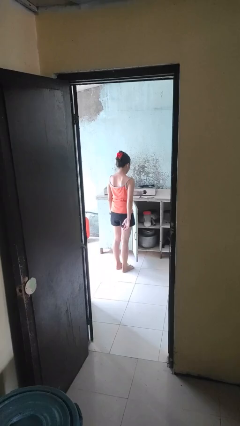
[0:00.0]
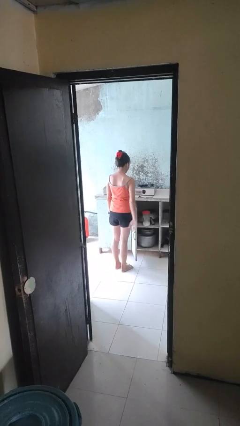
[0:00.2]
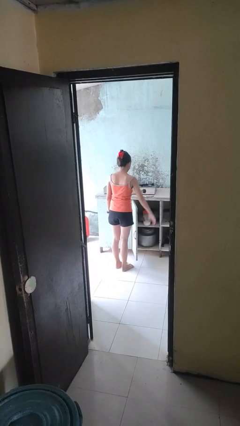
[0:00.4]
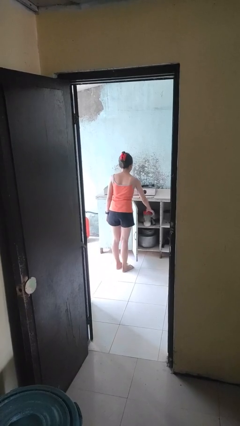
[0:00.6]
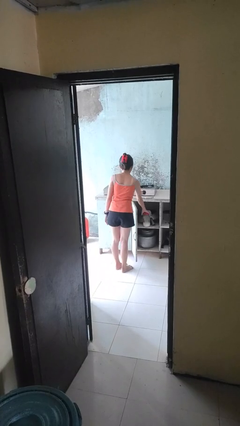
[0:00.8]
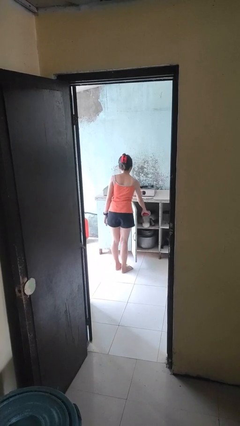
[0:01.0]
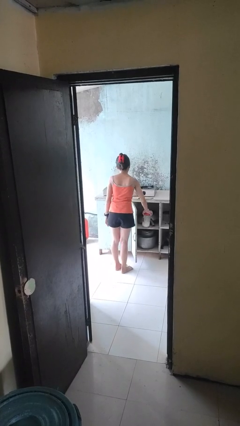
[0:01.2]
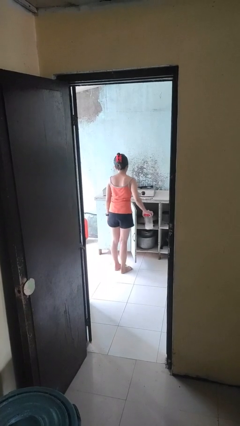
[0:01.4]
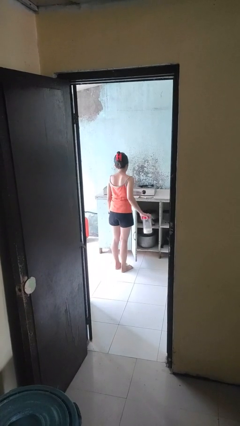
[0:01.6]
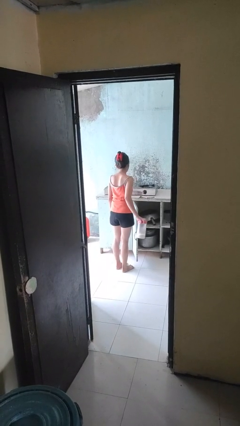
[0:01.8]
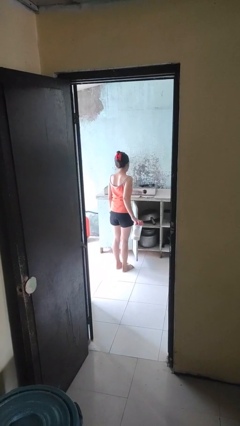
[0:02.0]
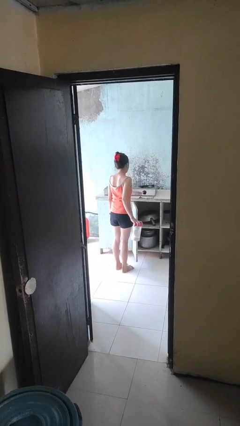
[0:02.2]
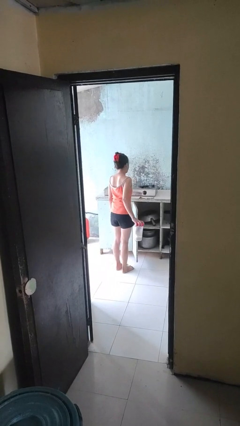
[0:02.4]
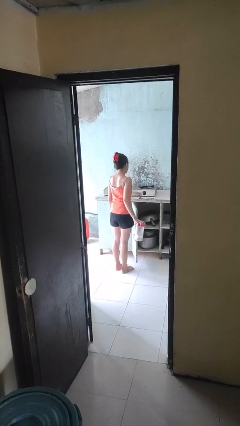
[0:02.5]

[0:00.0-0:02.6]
person picks up object from cabinet

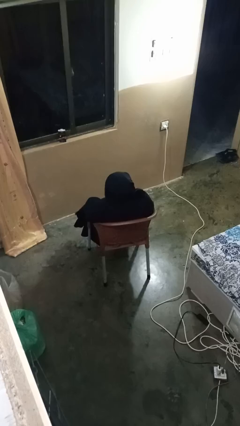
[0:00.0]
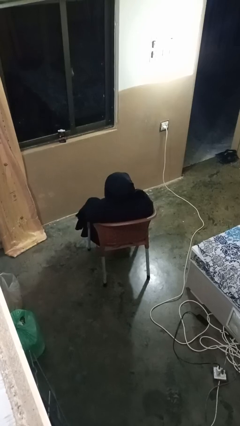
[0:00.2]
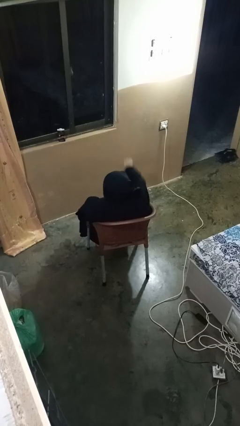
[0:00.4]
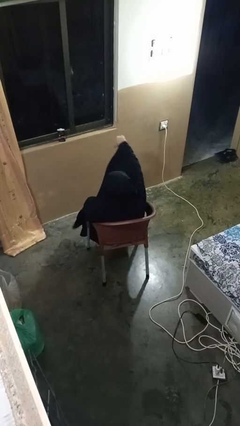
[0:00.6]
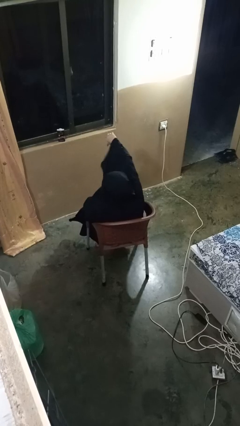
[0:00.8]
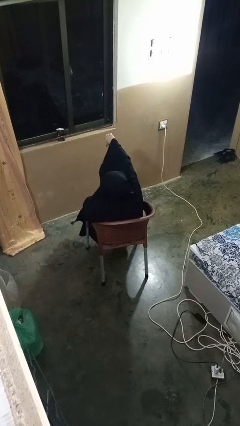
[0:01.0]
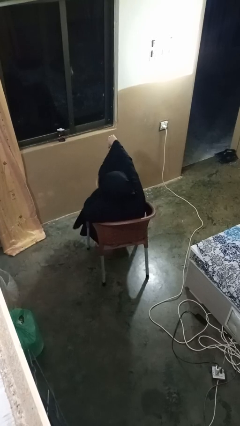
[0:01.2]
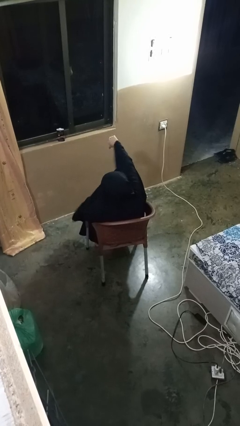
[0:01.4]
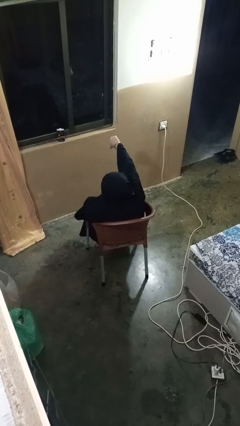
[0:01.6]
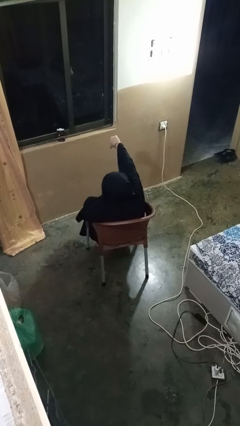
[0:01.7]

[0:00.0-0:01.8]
person gestures thumbs down

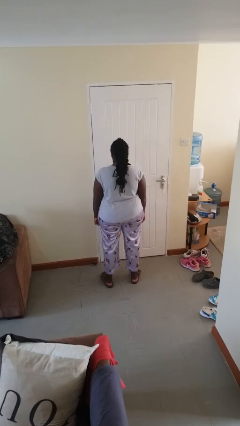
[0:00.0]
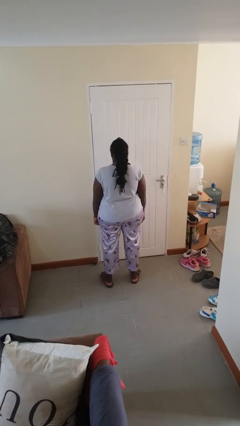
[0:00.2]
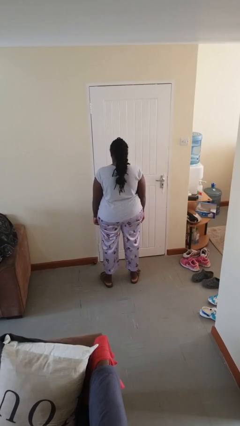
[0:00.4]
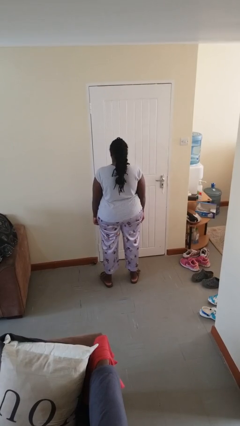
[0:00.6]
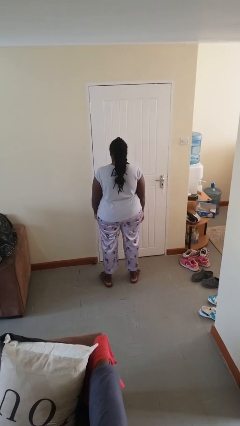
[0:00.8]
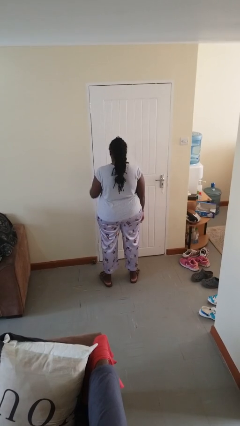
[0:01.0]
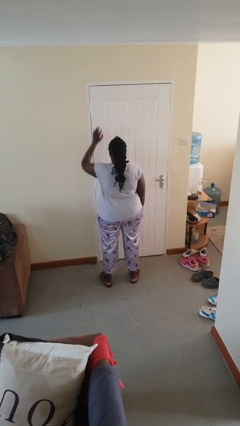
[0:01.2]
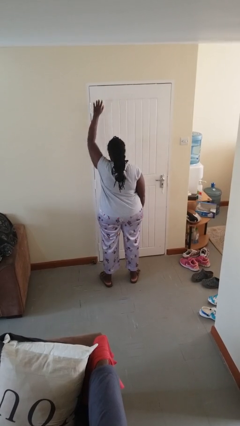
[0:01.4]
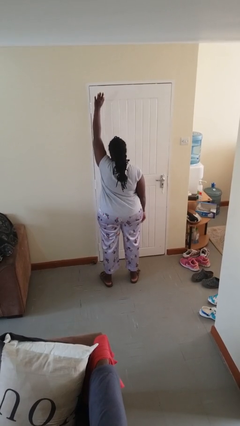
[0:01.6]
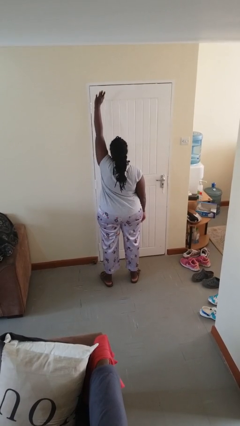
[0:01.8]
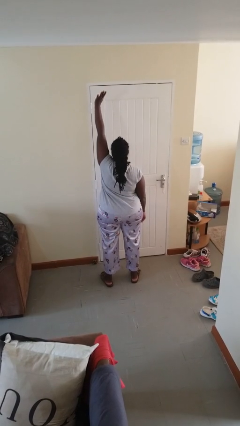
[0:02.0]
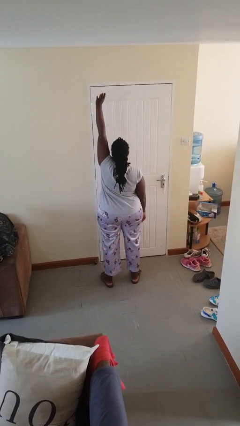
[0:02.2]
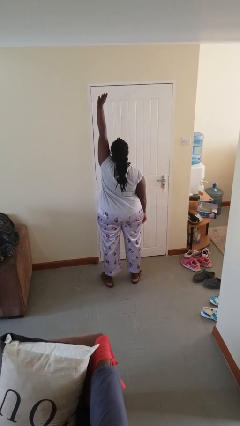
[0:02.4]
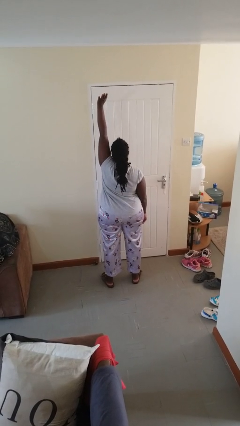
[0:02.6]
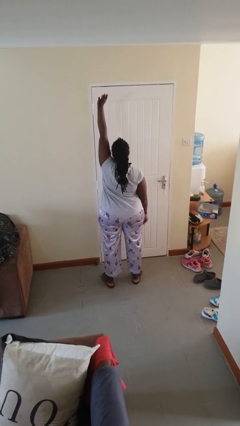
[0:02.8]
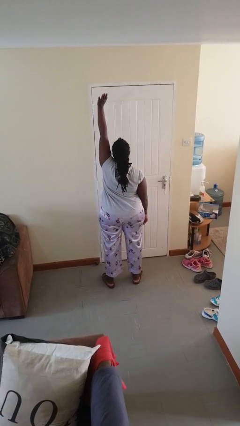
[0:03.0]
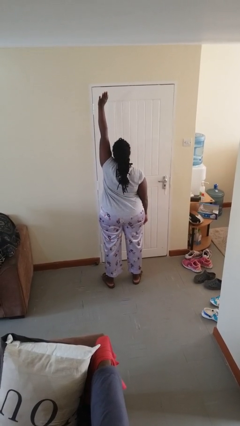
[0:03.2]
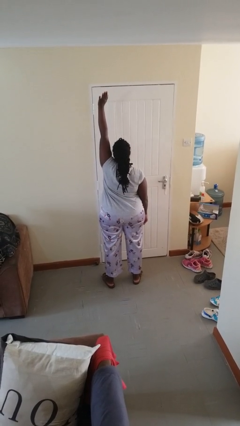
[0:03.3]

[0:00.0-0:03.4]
person gestures raise hand

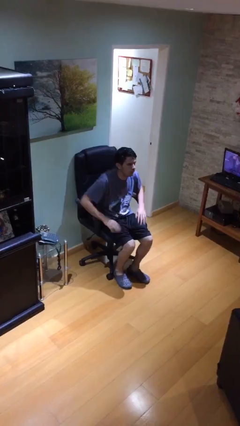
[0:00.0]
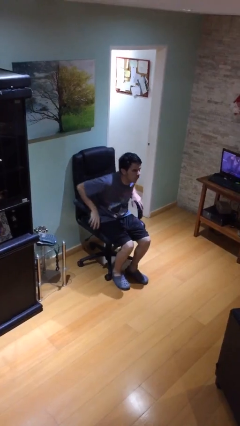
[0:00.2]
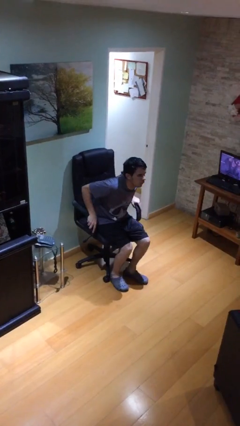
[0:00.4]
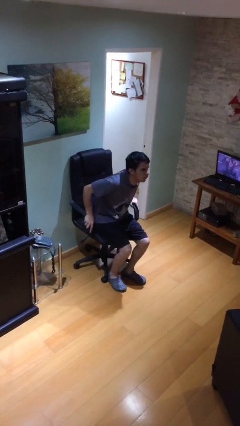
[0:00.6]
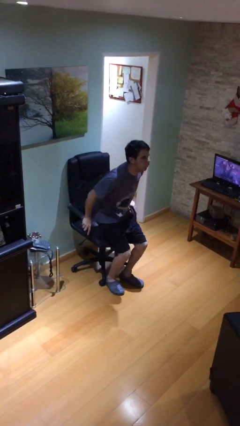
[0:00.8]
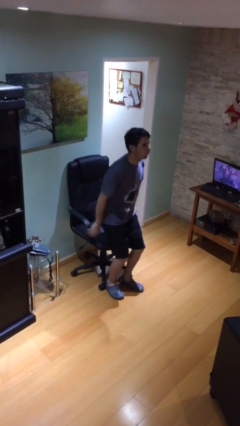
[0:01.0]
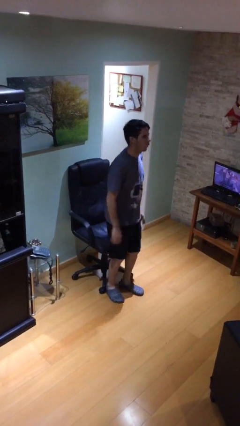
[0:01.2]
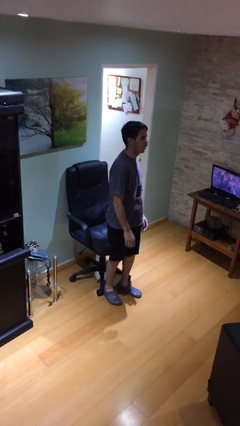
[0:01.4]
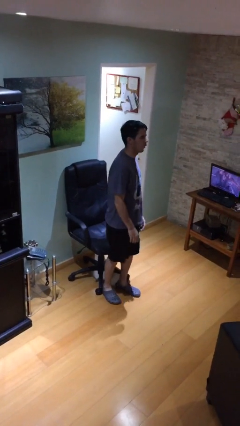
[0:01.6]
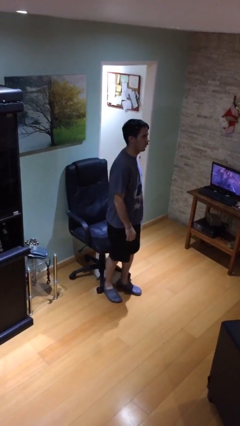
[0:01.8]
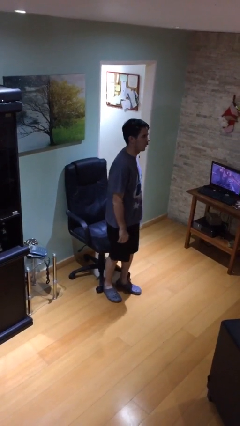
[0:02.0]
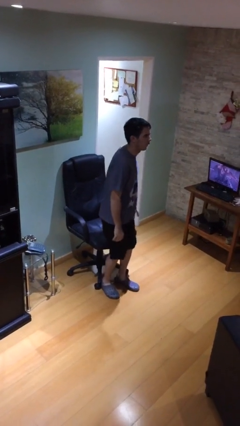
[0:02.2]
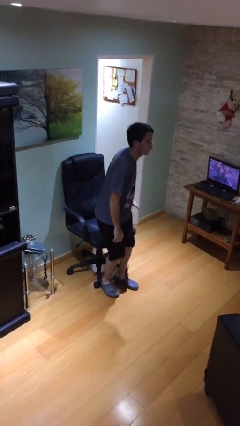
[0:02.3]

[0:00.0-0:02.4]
person stands up

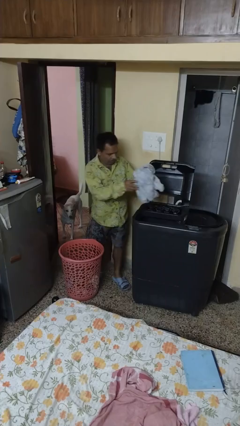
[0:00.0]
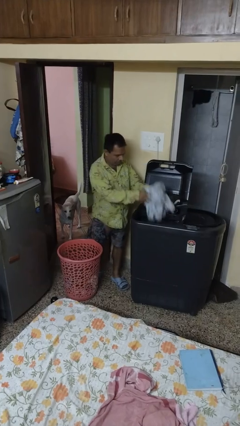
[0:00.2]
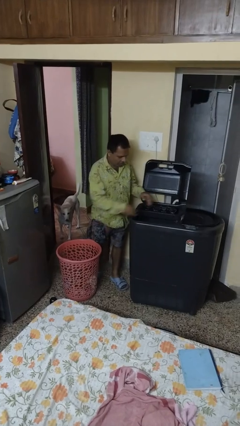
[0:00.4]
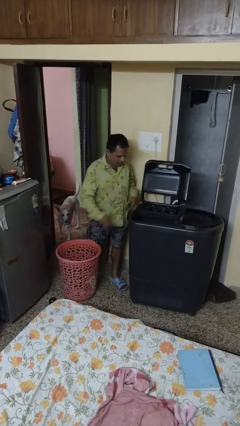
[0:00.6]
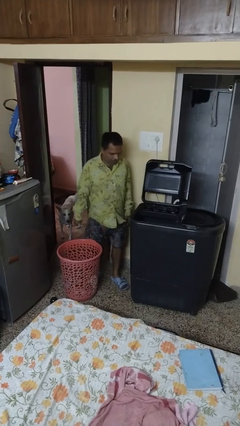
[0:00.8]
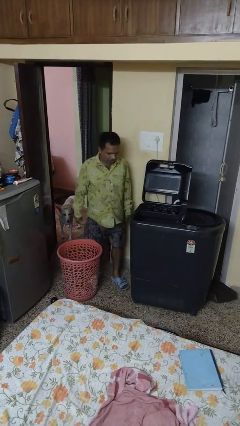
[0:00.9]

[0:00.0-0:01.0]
person loads clotheswasher

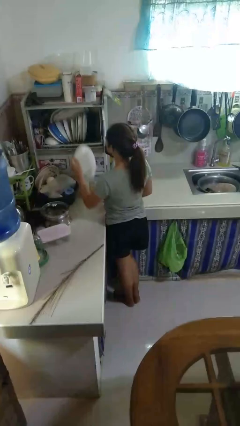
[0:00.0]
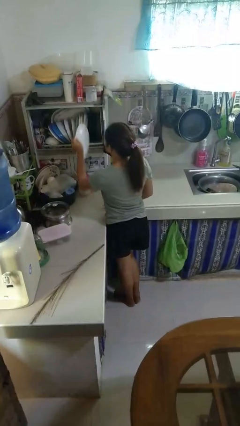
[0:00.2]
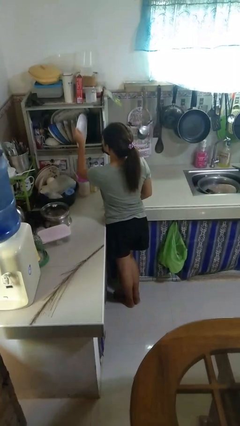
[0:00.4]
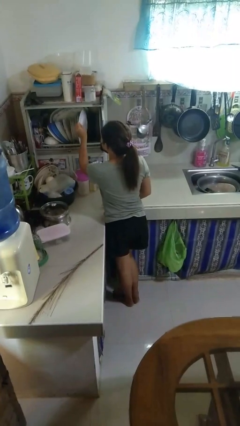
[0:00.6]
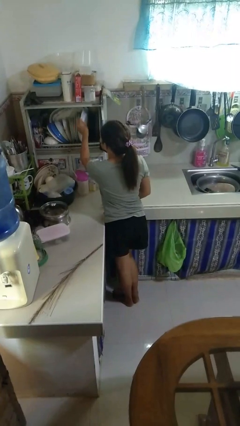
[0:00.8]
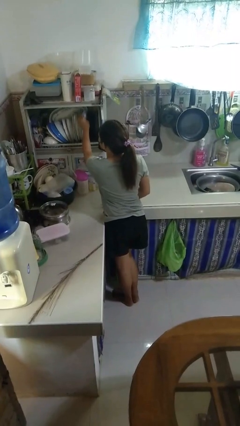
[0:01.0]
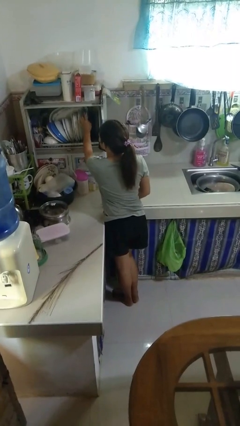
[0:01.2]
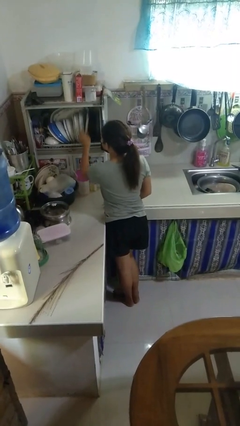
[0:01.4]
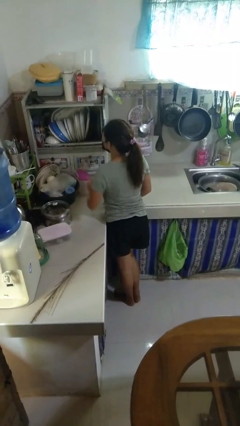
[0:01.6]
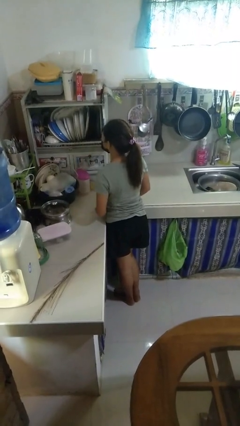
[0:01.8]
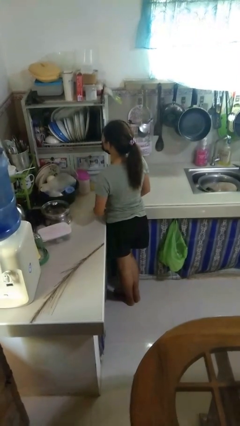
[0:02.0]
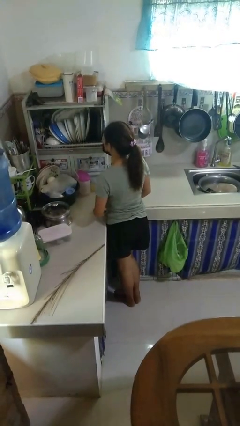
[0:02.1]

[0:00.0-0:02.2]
person puts object into kitchen drawer

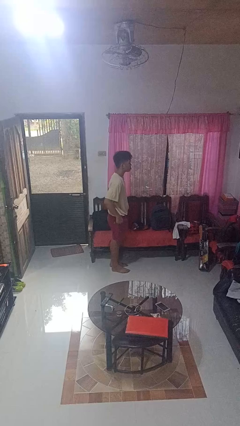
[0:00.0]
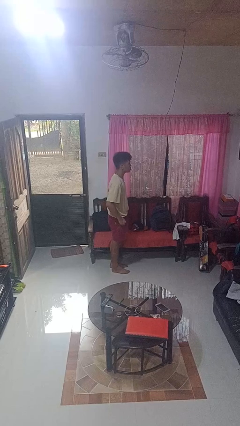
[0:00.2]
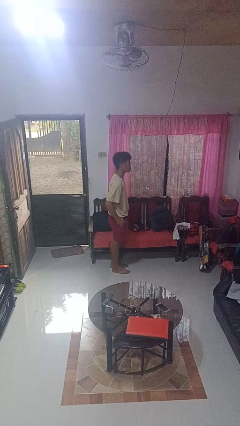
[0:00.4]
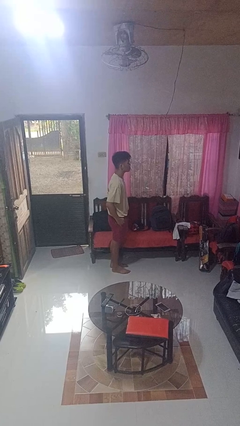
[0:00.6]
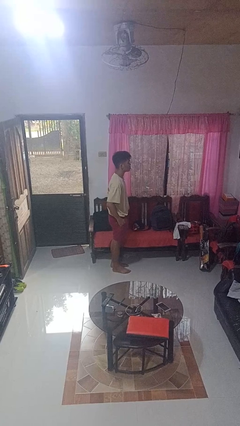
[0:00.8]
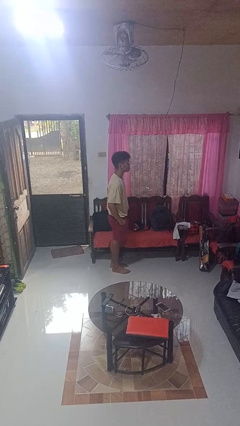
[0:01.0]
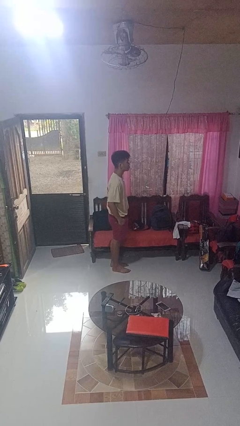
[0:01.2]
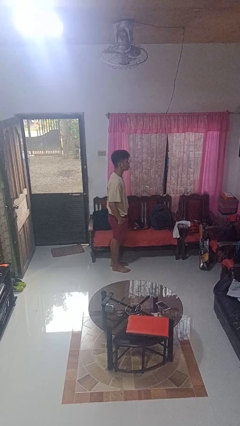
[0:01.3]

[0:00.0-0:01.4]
person puts hands in back pockets

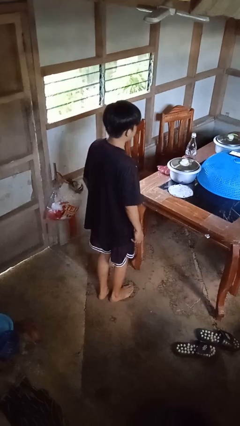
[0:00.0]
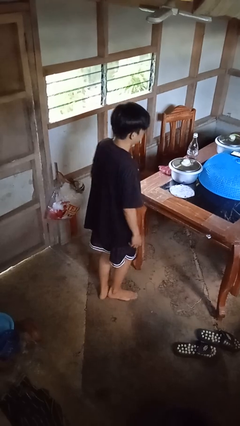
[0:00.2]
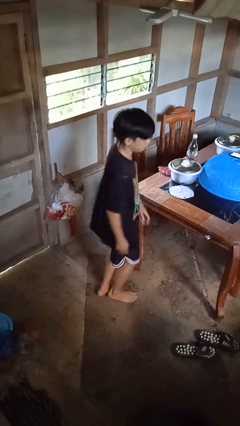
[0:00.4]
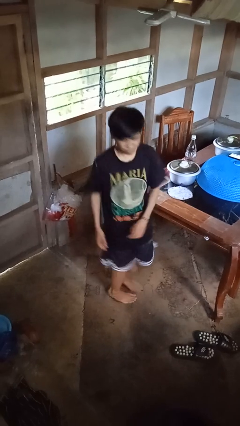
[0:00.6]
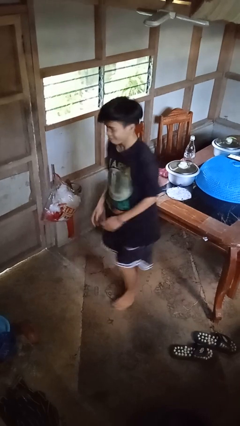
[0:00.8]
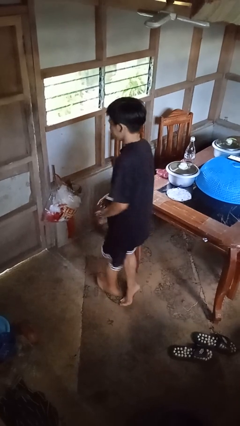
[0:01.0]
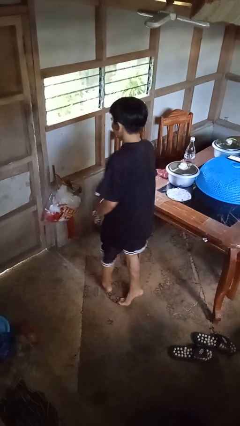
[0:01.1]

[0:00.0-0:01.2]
person twirls

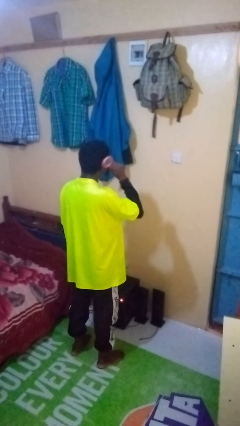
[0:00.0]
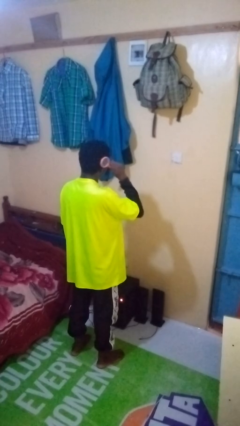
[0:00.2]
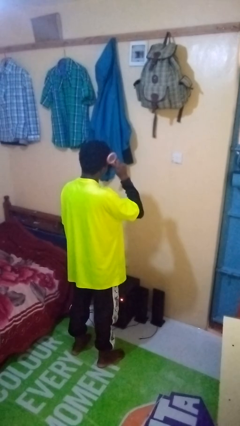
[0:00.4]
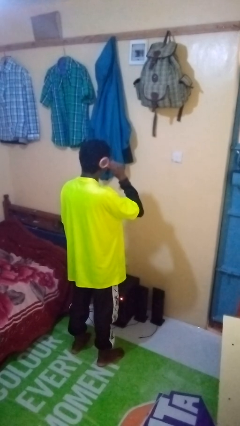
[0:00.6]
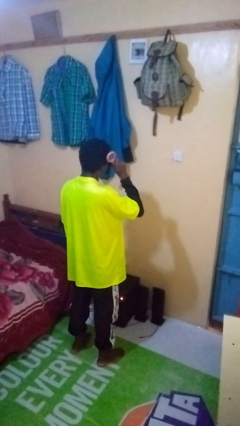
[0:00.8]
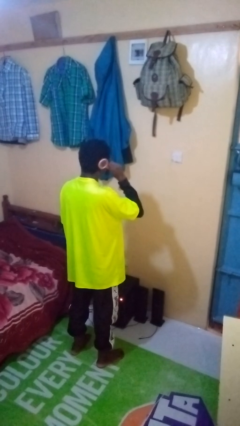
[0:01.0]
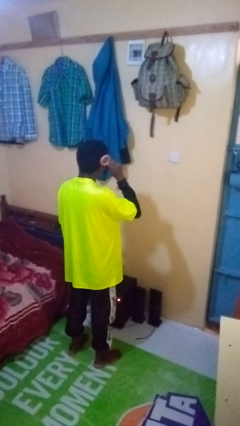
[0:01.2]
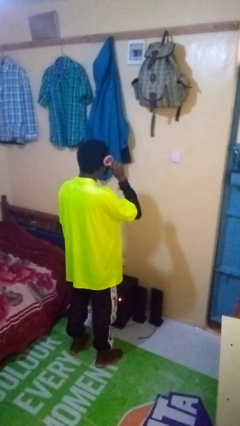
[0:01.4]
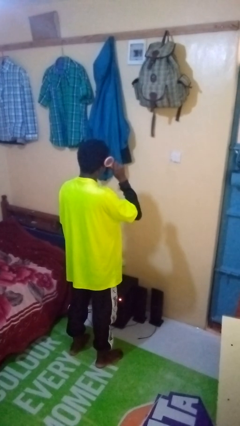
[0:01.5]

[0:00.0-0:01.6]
person brushes hair
